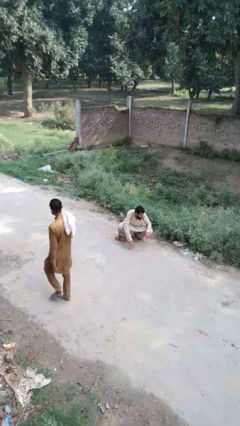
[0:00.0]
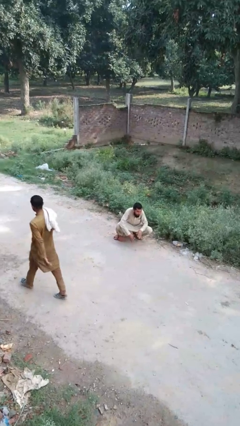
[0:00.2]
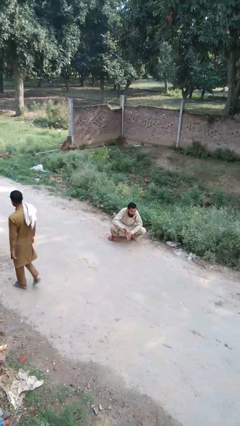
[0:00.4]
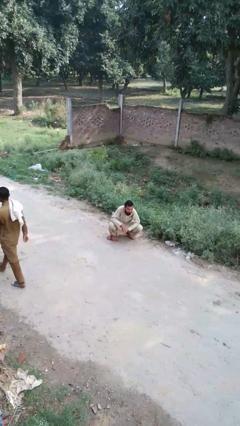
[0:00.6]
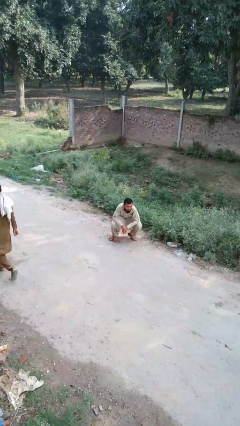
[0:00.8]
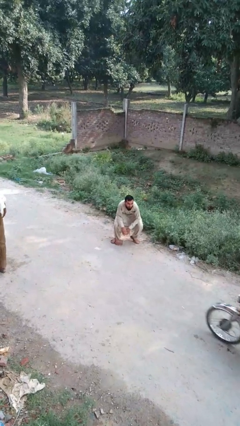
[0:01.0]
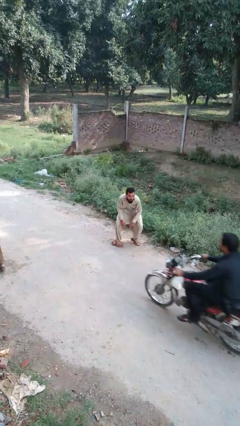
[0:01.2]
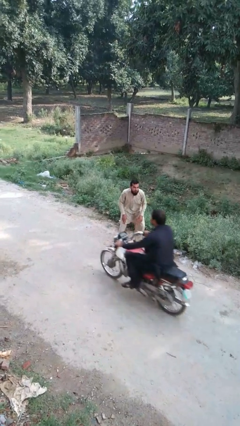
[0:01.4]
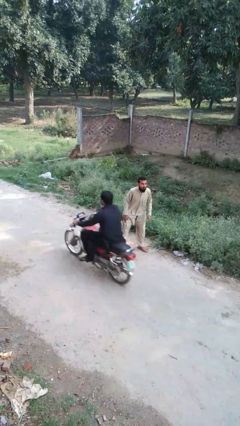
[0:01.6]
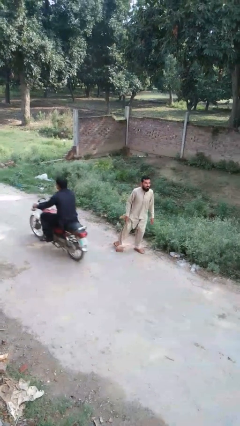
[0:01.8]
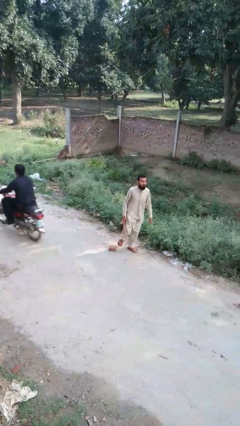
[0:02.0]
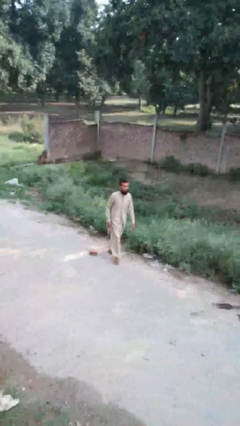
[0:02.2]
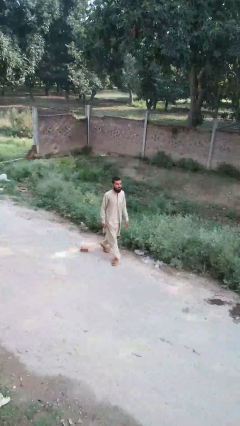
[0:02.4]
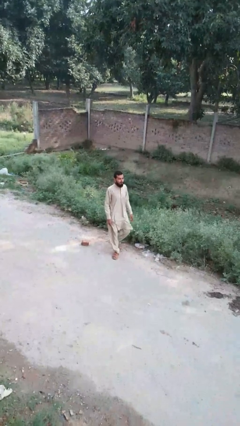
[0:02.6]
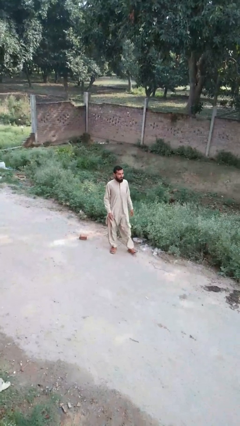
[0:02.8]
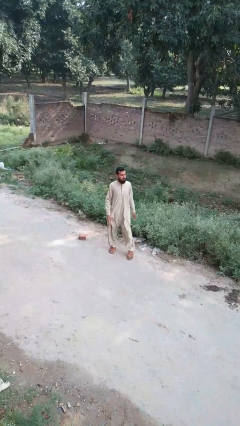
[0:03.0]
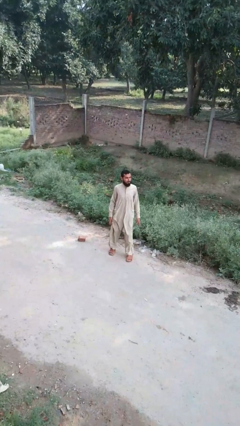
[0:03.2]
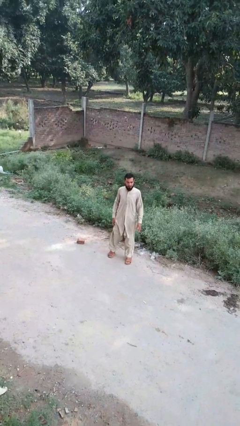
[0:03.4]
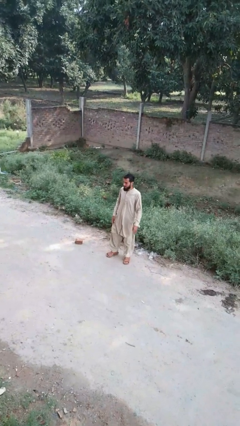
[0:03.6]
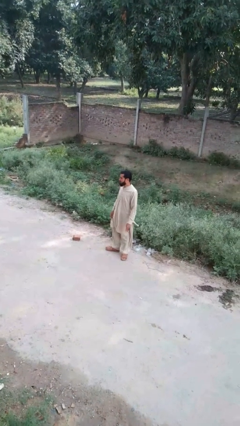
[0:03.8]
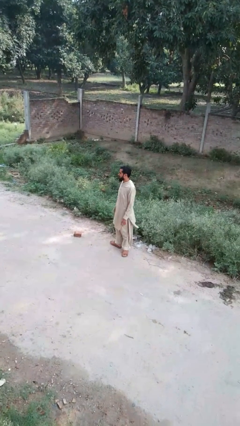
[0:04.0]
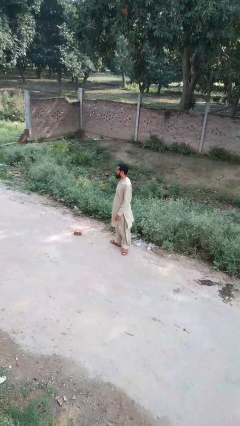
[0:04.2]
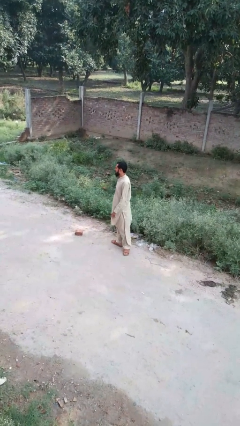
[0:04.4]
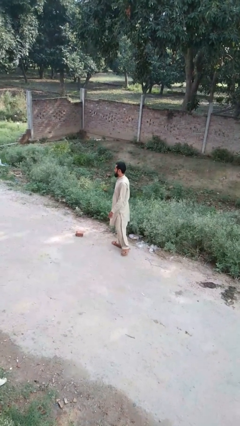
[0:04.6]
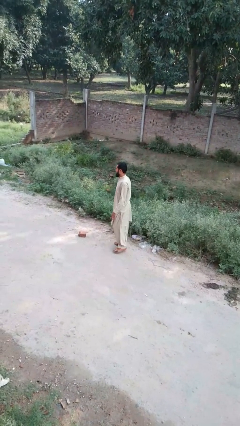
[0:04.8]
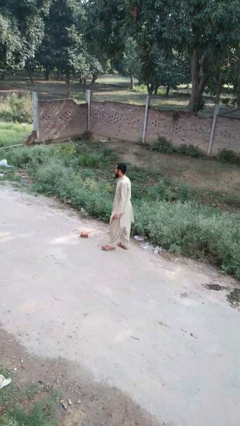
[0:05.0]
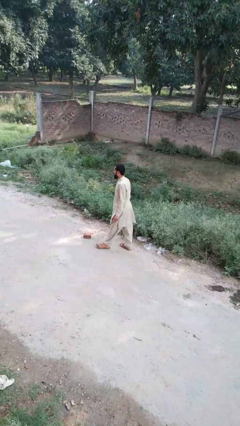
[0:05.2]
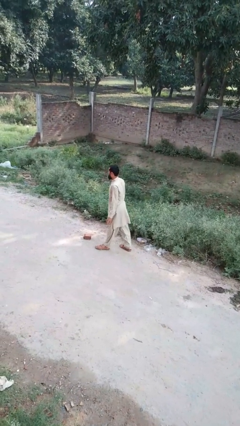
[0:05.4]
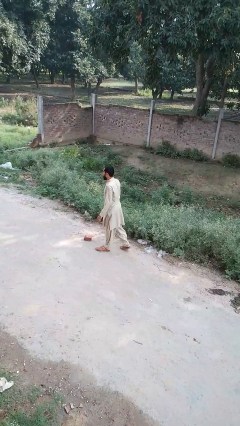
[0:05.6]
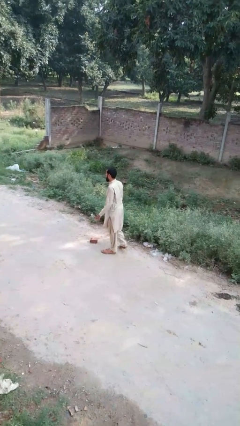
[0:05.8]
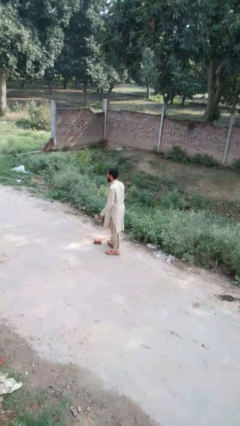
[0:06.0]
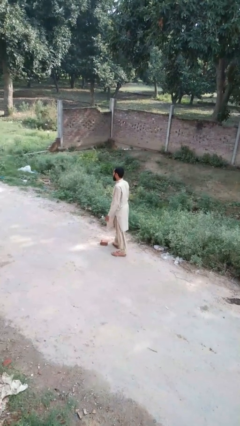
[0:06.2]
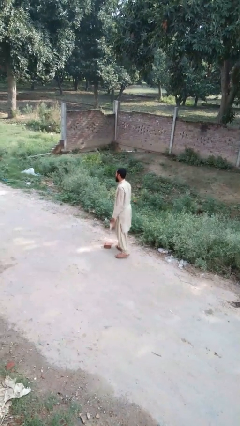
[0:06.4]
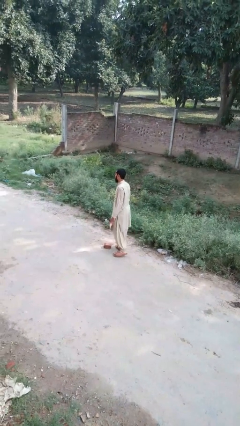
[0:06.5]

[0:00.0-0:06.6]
person stands up from floor

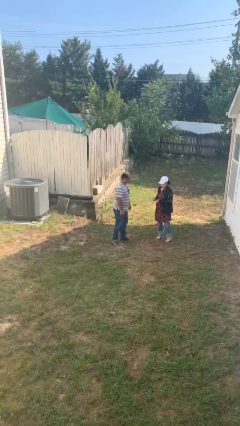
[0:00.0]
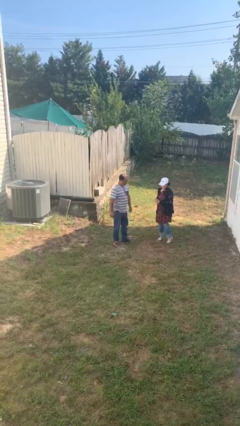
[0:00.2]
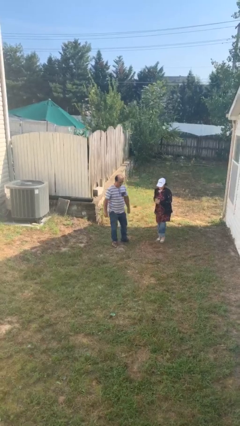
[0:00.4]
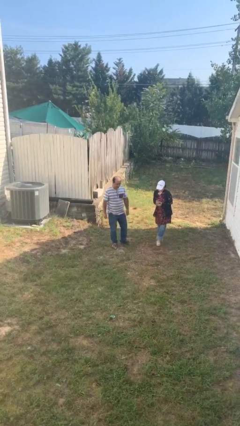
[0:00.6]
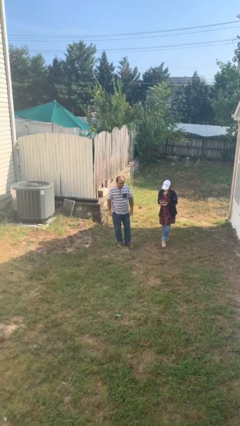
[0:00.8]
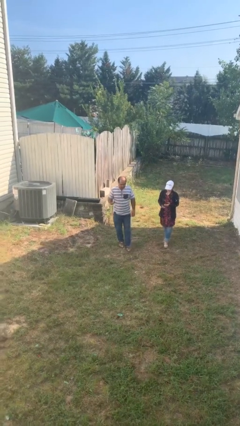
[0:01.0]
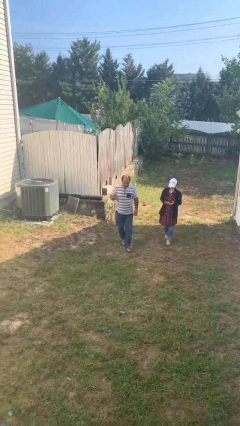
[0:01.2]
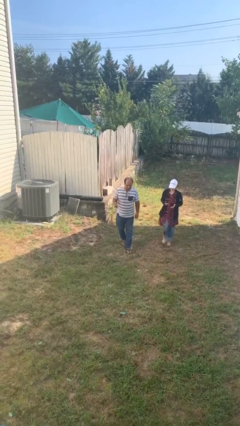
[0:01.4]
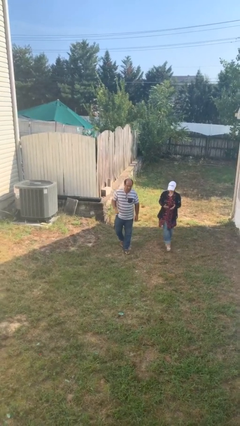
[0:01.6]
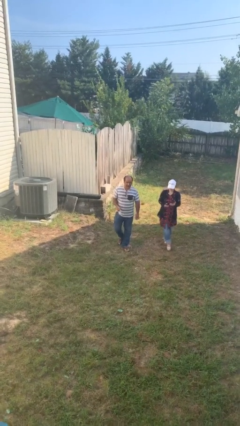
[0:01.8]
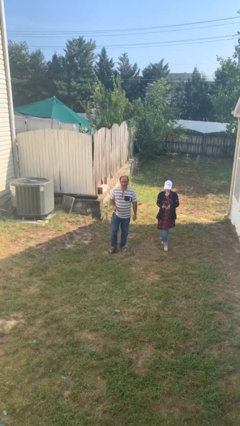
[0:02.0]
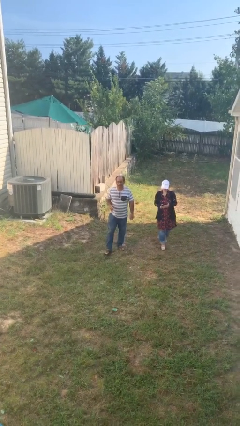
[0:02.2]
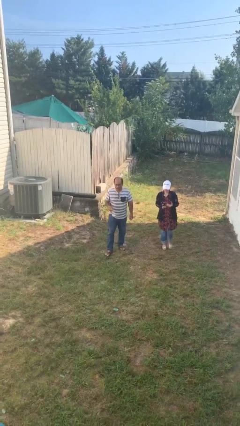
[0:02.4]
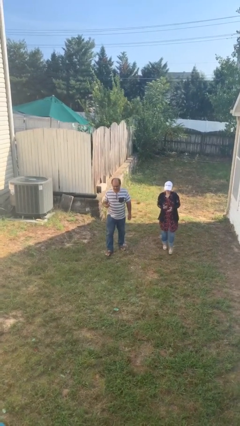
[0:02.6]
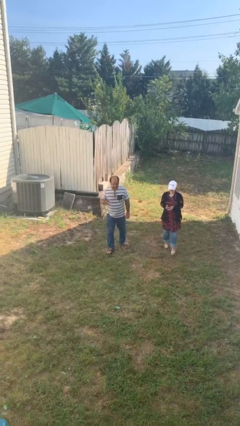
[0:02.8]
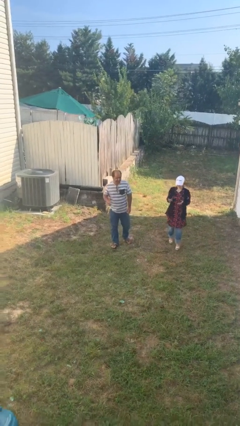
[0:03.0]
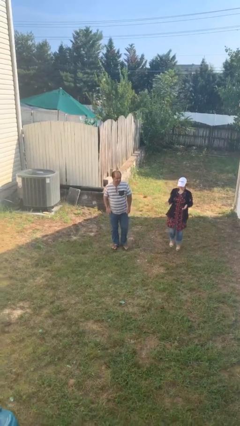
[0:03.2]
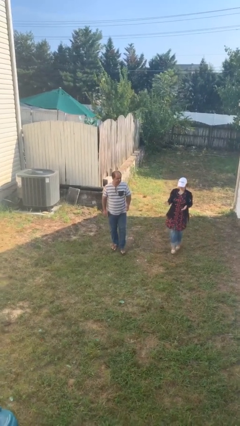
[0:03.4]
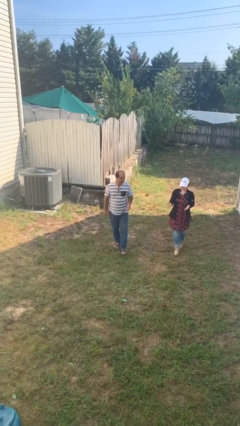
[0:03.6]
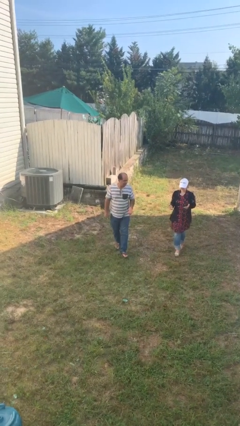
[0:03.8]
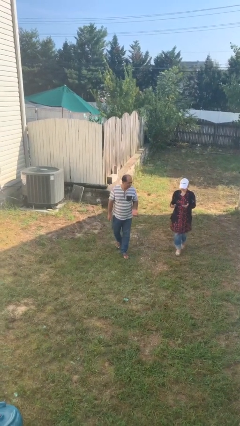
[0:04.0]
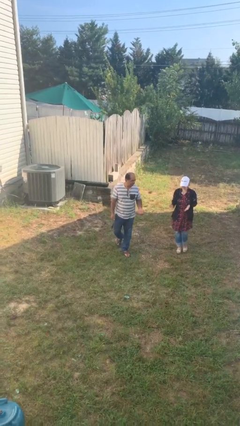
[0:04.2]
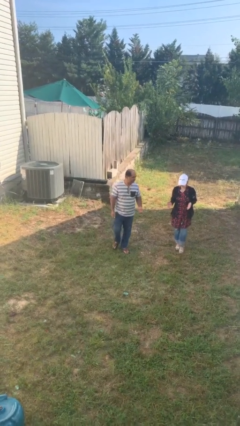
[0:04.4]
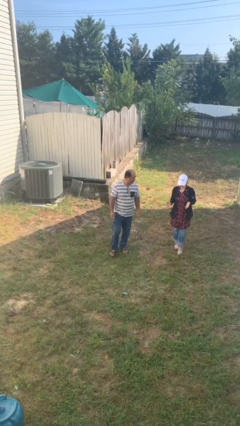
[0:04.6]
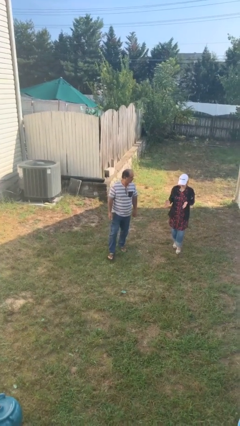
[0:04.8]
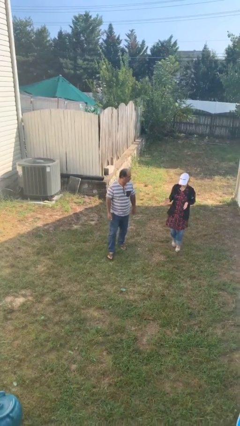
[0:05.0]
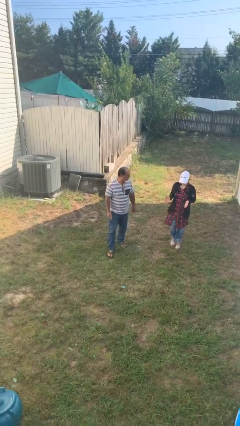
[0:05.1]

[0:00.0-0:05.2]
person talks to person

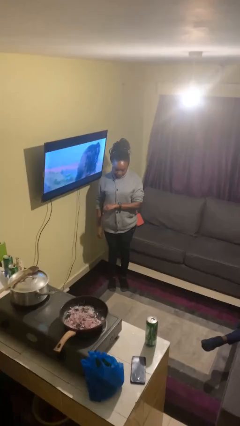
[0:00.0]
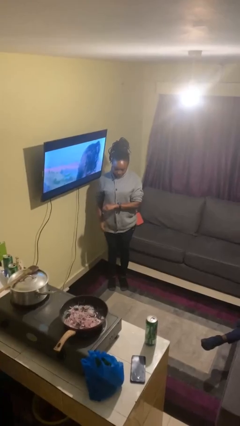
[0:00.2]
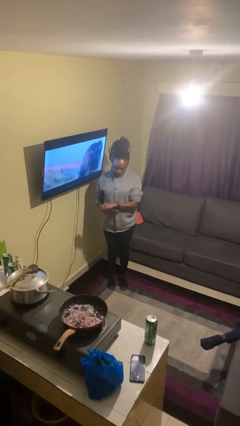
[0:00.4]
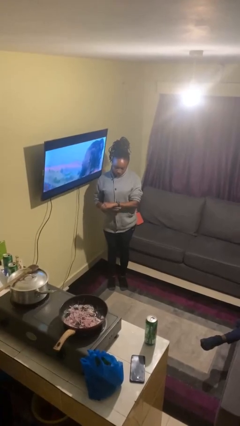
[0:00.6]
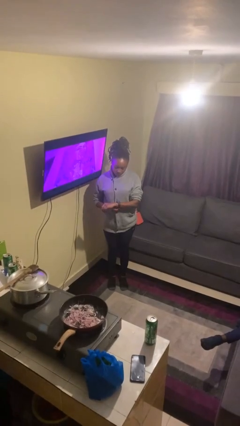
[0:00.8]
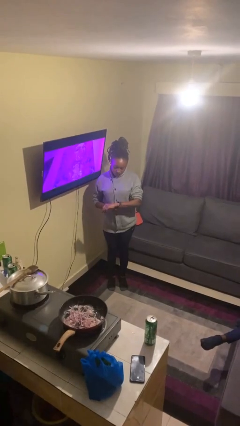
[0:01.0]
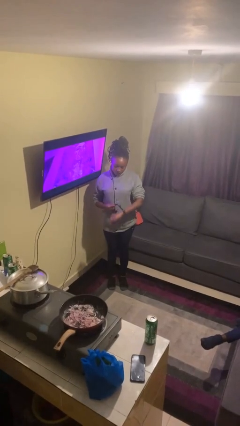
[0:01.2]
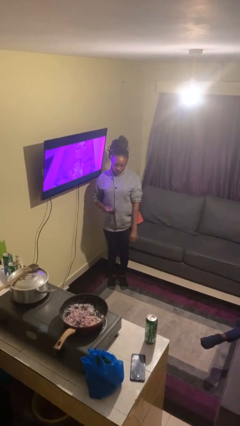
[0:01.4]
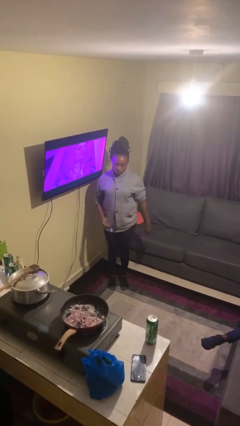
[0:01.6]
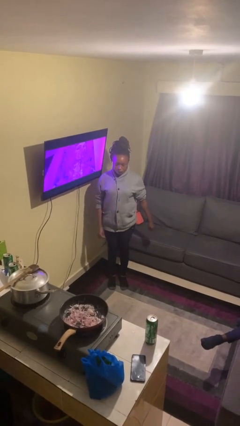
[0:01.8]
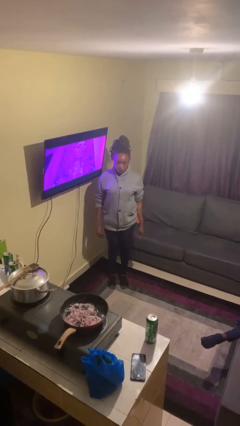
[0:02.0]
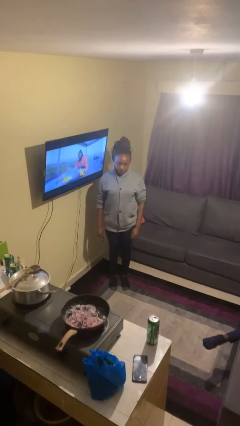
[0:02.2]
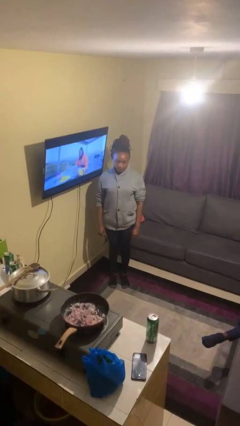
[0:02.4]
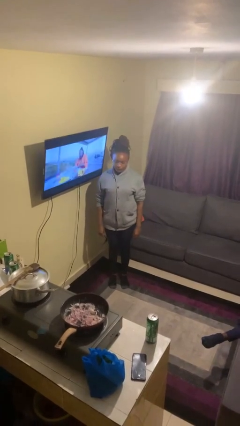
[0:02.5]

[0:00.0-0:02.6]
person takes off wristwatch

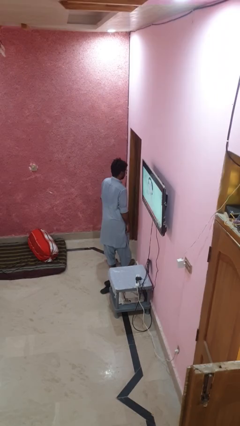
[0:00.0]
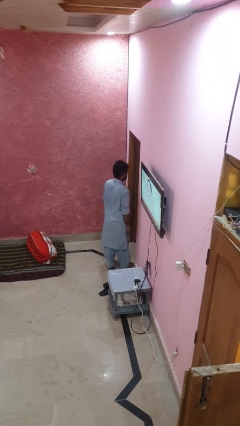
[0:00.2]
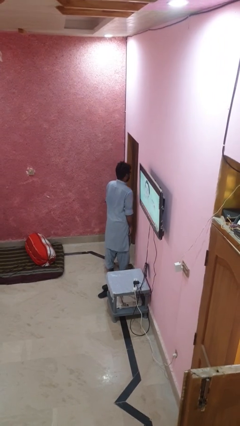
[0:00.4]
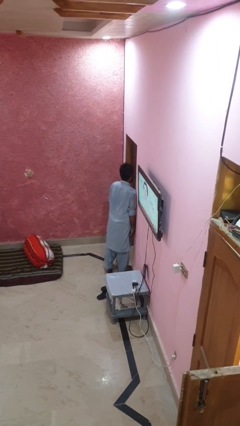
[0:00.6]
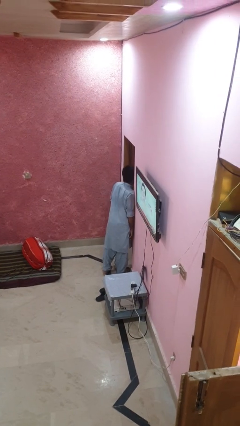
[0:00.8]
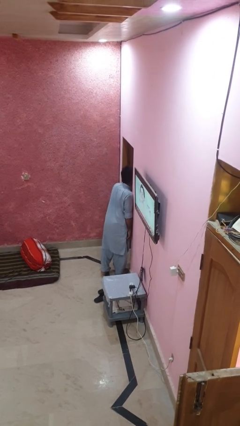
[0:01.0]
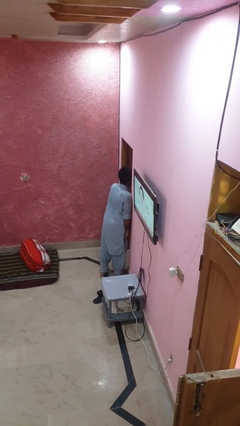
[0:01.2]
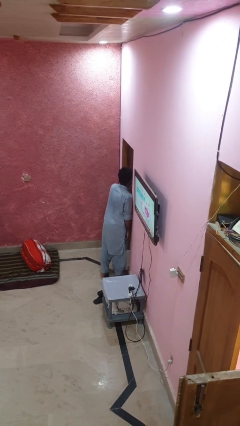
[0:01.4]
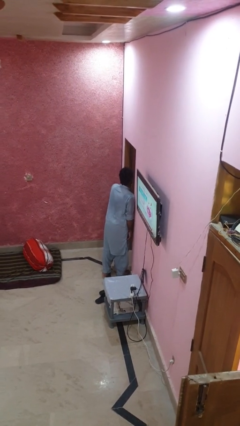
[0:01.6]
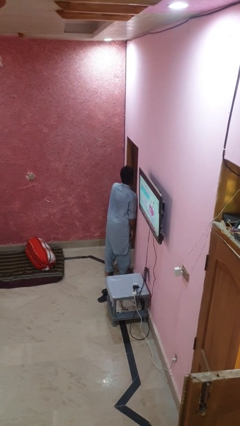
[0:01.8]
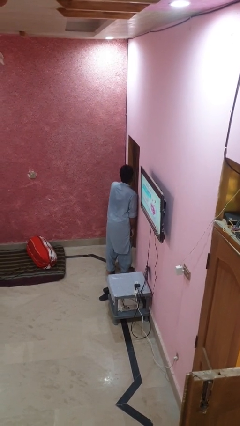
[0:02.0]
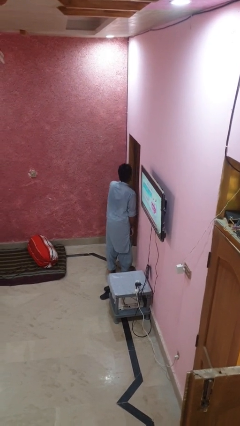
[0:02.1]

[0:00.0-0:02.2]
person bumps into wall

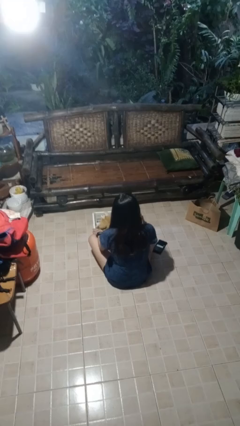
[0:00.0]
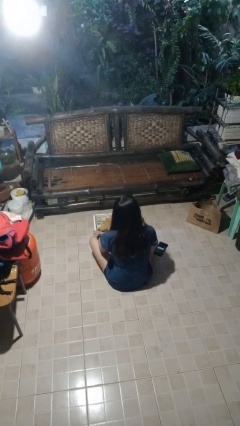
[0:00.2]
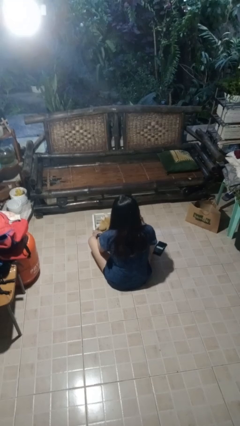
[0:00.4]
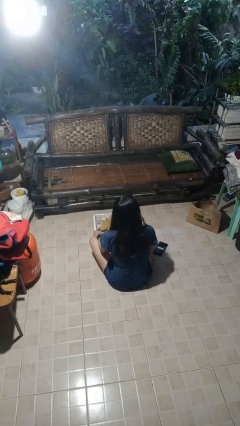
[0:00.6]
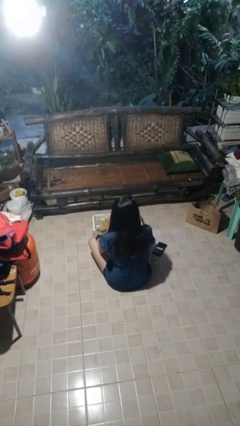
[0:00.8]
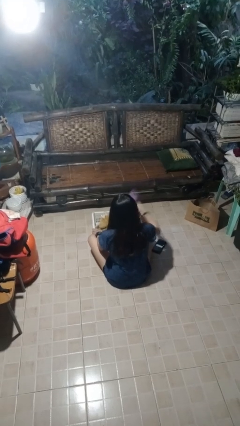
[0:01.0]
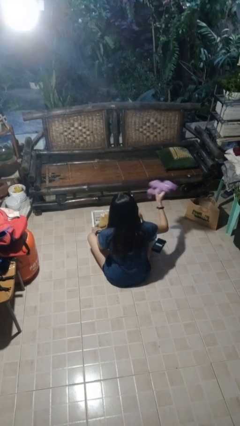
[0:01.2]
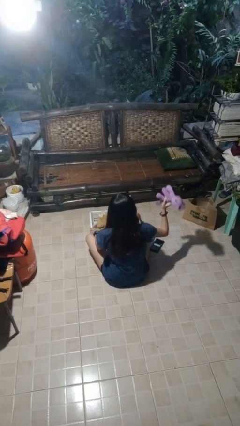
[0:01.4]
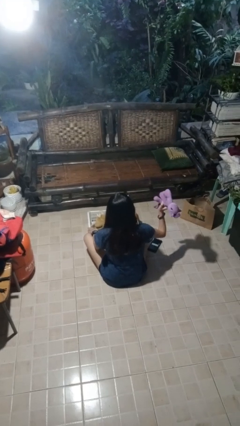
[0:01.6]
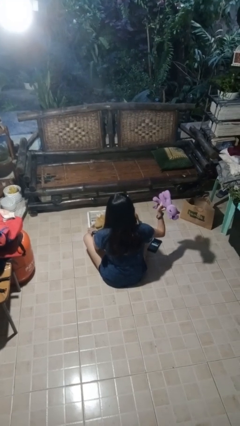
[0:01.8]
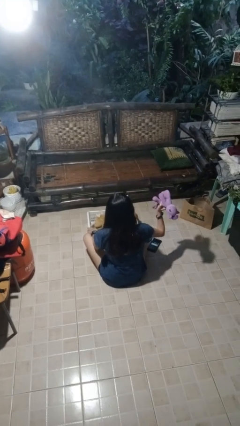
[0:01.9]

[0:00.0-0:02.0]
person takes object from basket
